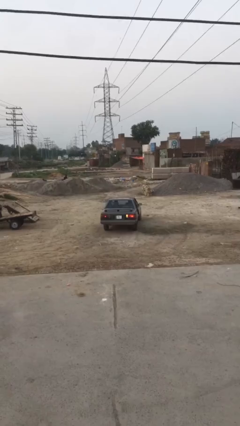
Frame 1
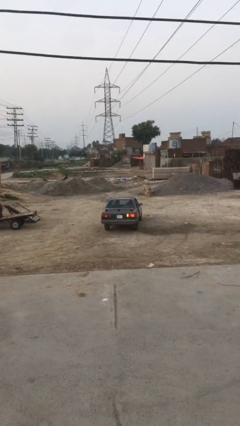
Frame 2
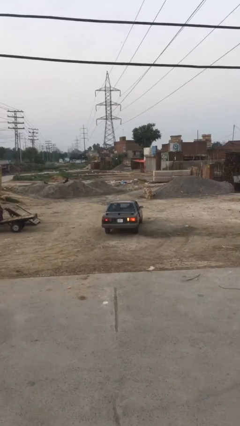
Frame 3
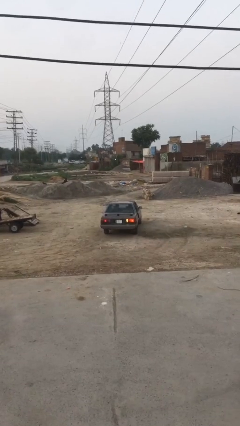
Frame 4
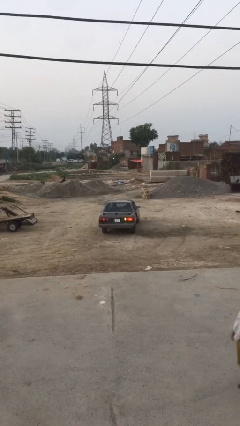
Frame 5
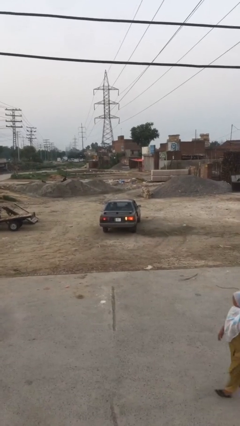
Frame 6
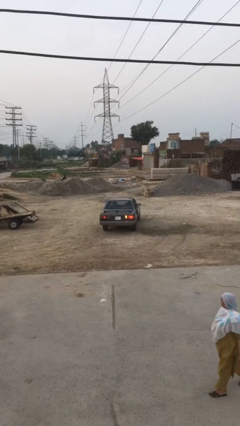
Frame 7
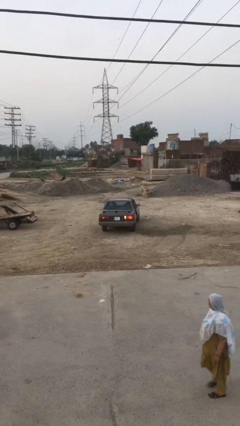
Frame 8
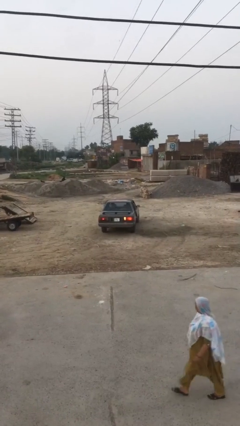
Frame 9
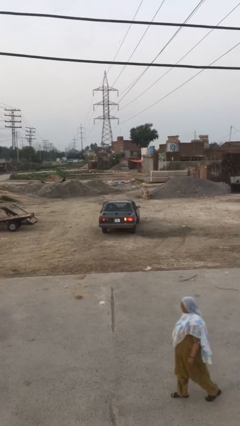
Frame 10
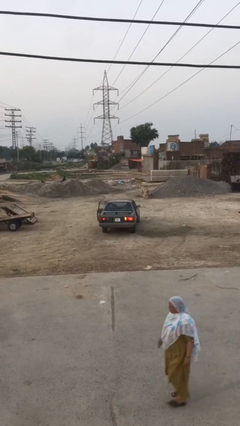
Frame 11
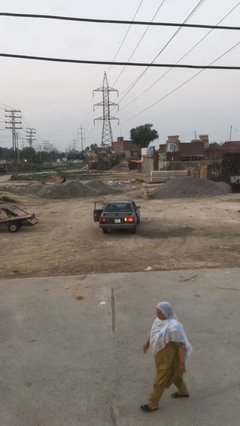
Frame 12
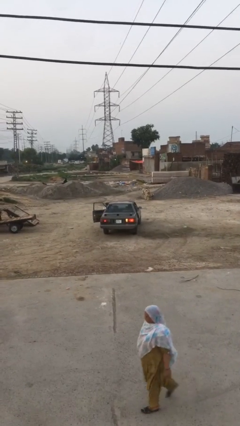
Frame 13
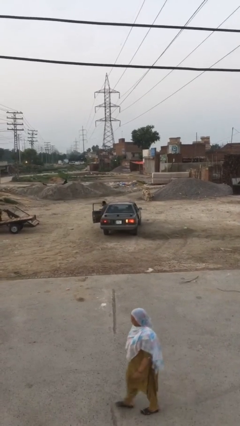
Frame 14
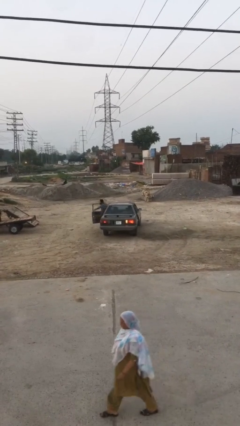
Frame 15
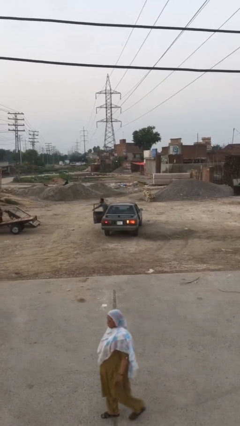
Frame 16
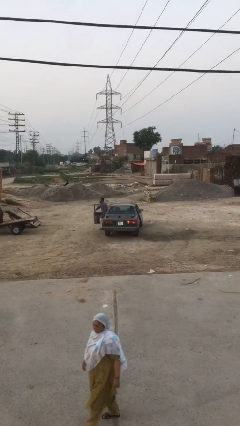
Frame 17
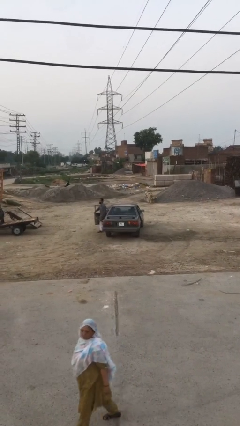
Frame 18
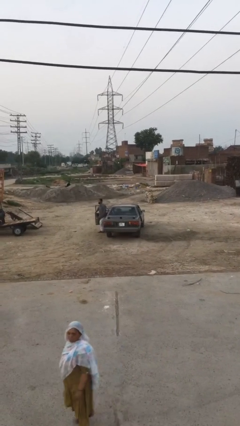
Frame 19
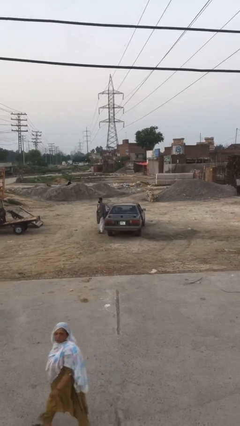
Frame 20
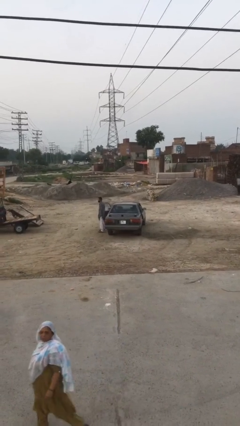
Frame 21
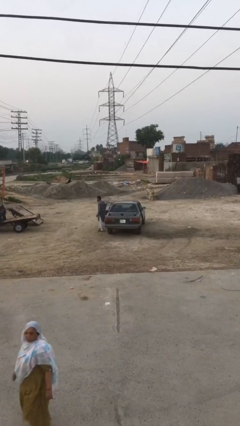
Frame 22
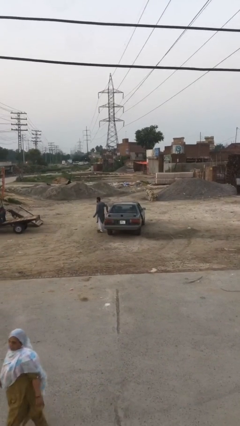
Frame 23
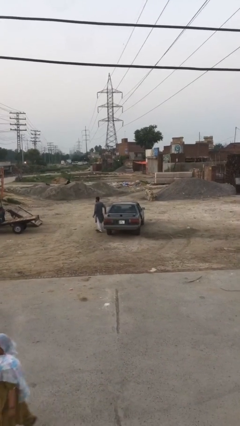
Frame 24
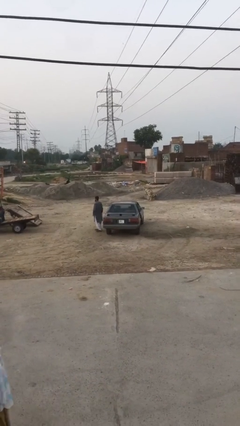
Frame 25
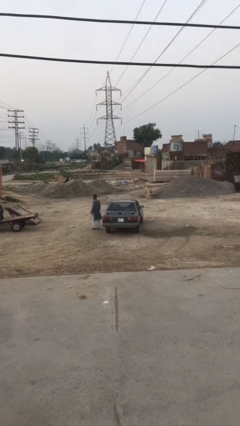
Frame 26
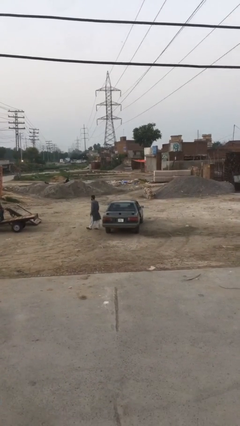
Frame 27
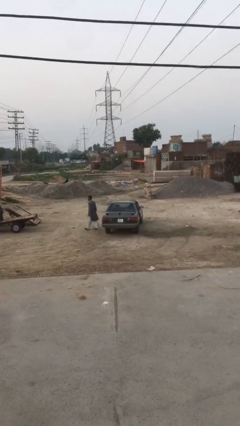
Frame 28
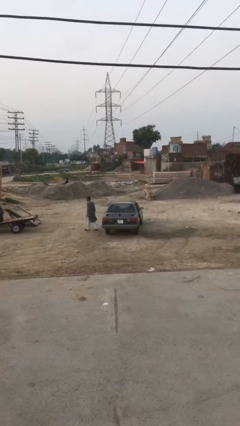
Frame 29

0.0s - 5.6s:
car drops off person

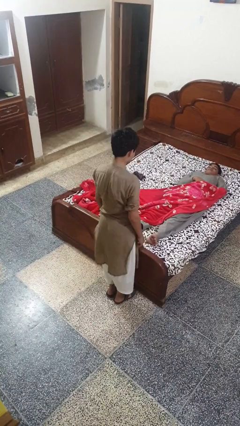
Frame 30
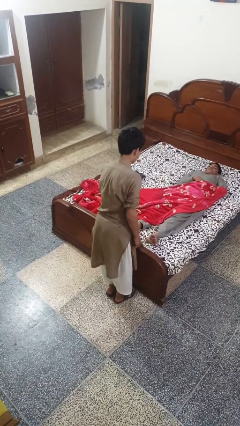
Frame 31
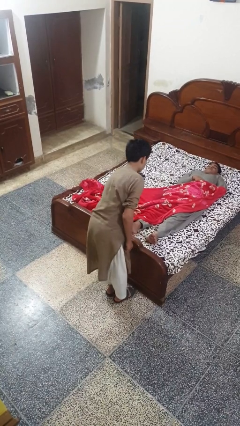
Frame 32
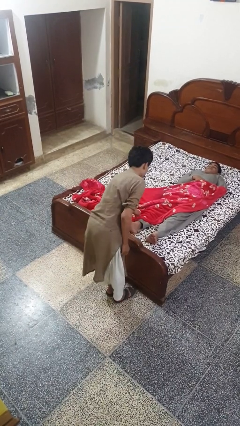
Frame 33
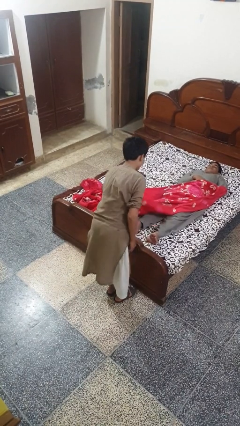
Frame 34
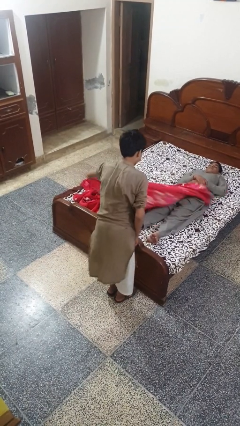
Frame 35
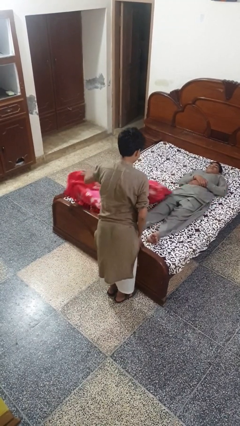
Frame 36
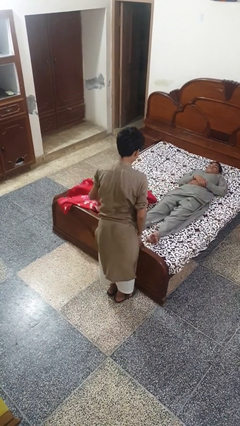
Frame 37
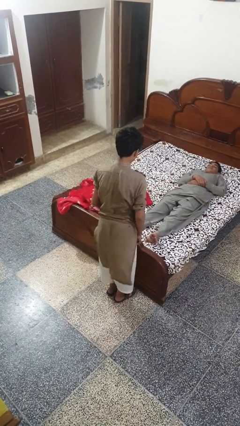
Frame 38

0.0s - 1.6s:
person uncovers friend with blanket

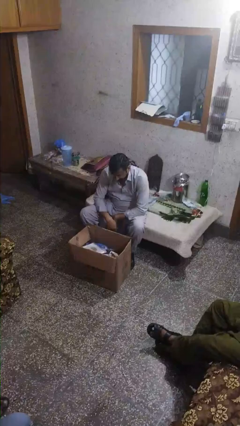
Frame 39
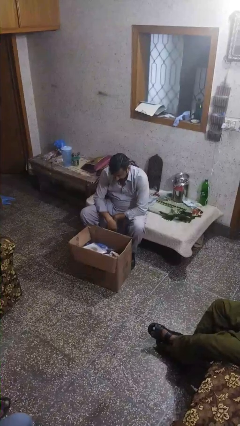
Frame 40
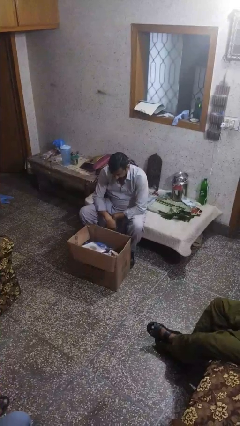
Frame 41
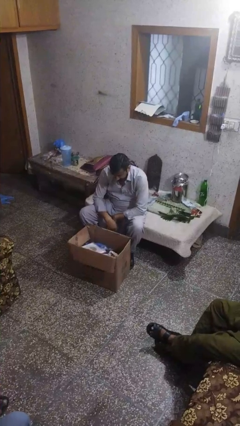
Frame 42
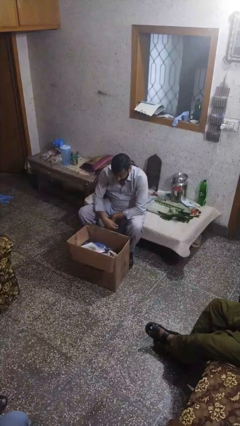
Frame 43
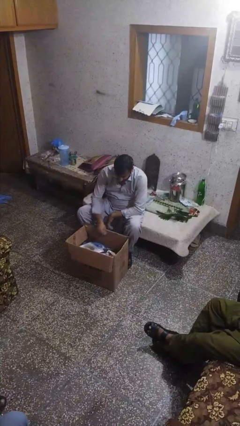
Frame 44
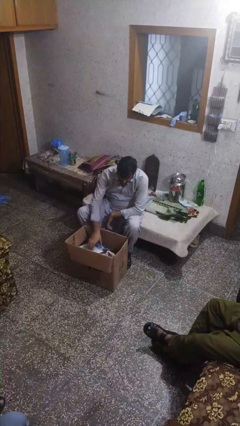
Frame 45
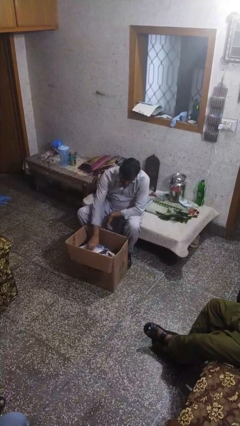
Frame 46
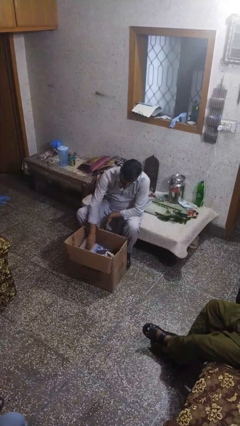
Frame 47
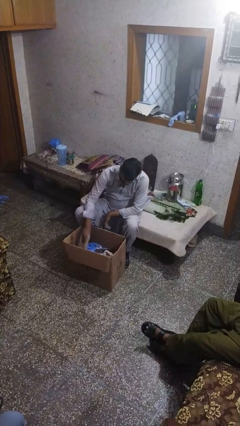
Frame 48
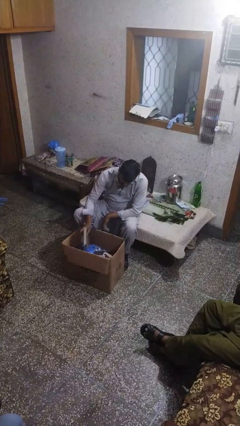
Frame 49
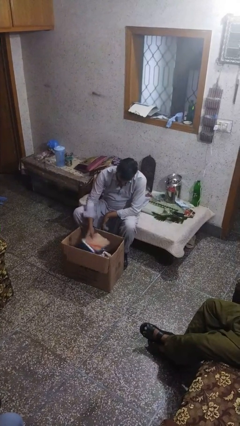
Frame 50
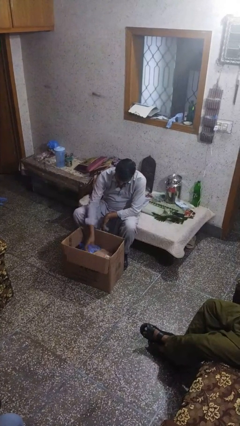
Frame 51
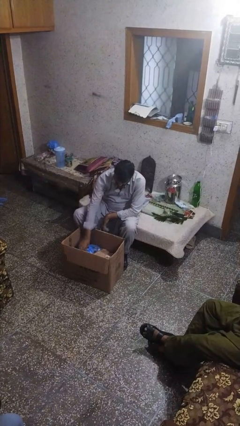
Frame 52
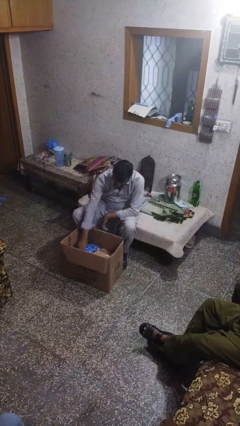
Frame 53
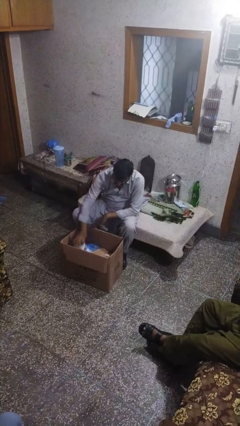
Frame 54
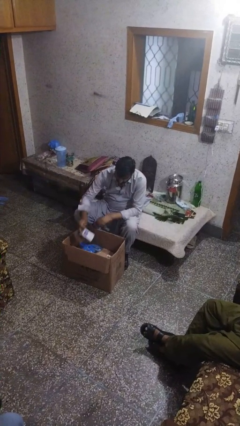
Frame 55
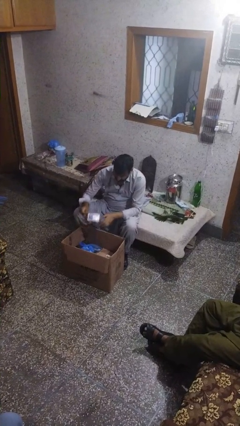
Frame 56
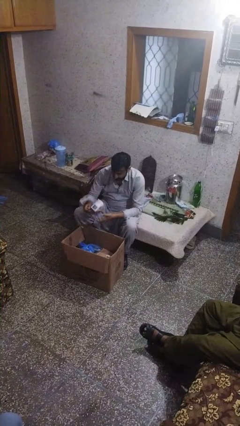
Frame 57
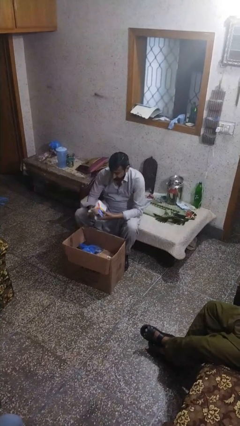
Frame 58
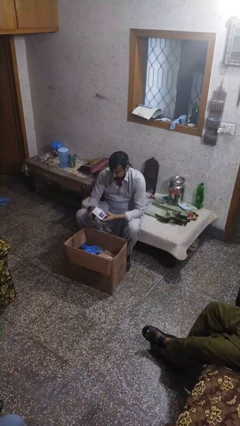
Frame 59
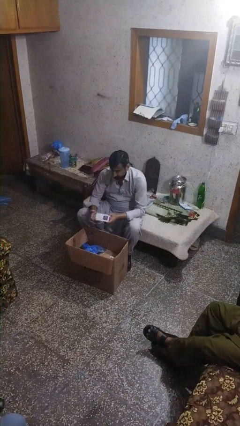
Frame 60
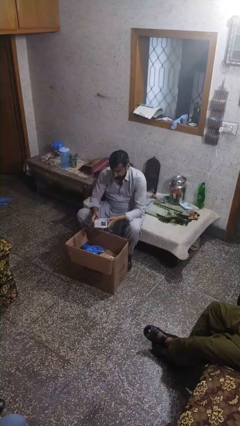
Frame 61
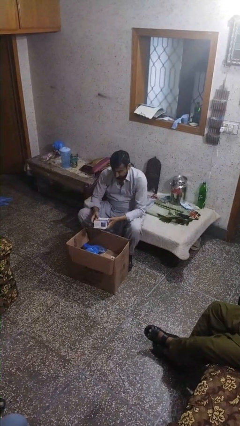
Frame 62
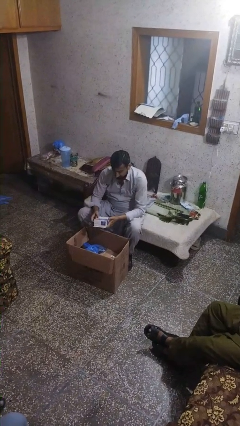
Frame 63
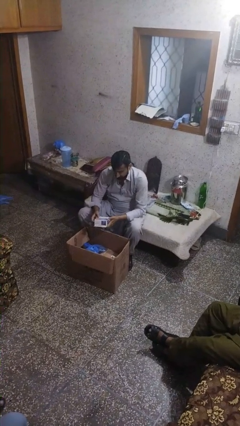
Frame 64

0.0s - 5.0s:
person takes object from box

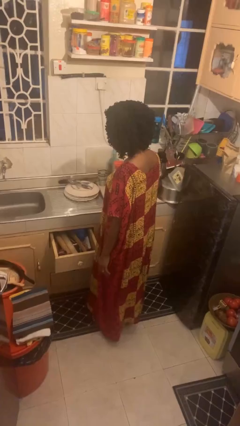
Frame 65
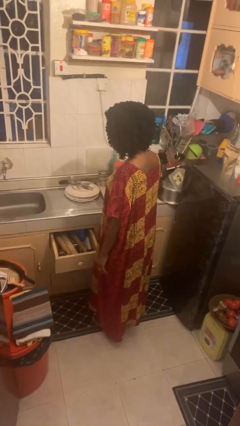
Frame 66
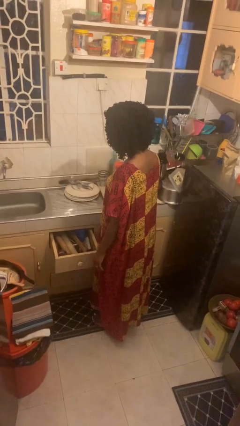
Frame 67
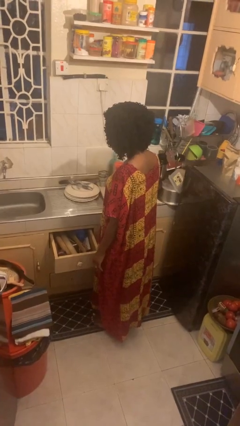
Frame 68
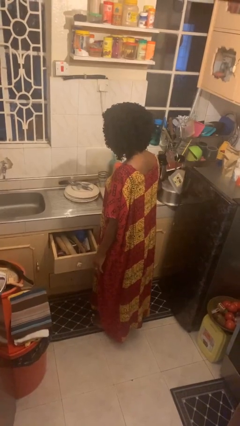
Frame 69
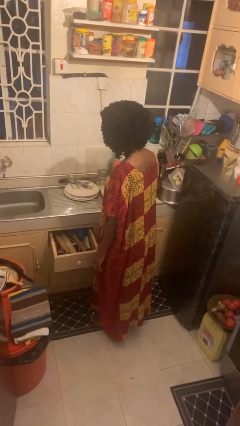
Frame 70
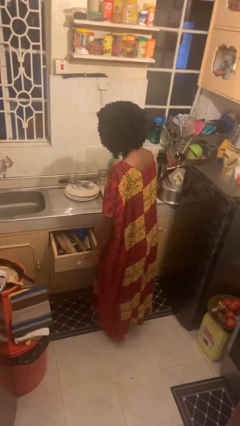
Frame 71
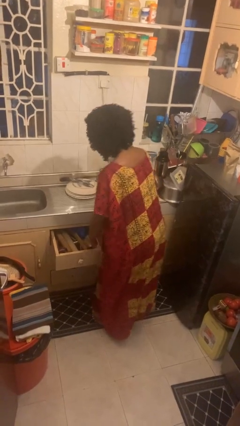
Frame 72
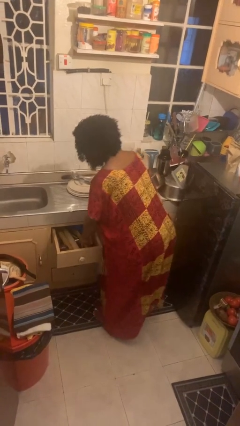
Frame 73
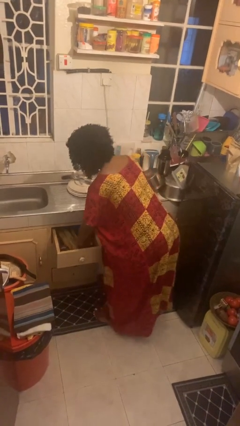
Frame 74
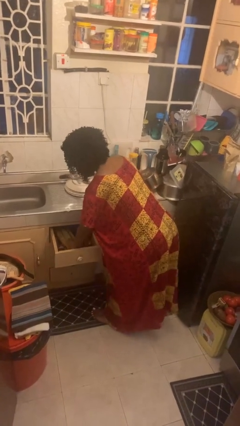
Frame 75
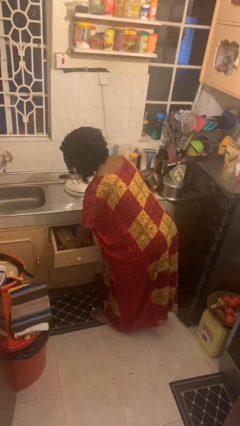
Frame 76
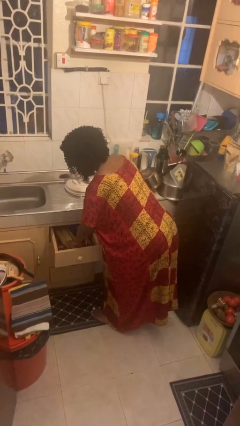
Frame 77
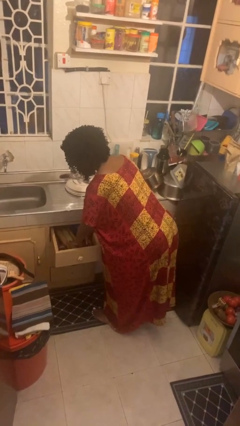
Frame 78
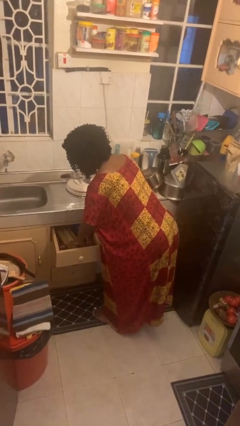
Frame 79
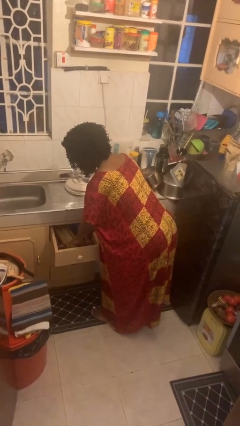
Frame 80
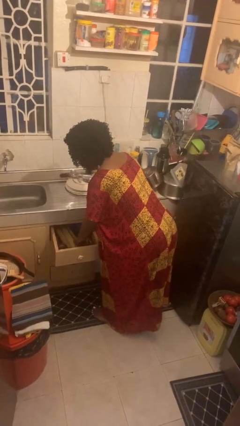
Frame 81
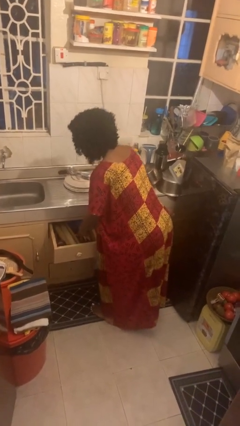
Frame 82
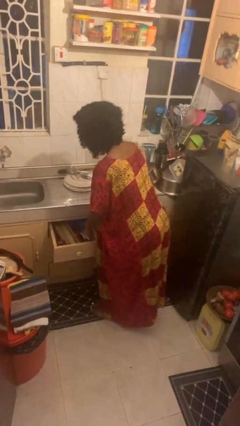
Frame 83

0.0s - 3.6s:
person searches in kitchen drawer

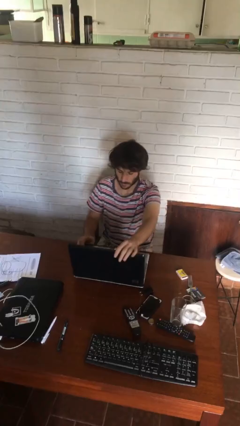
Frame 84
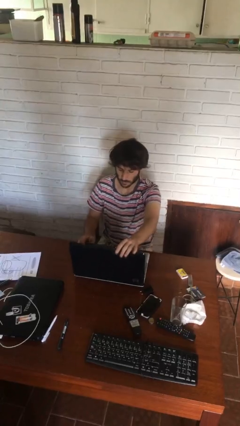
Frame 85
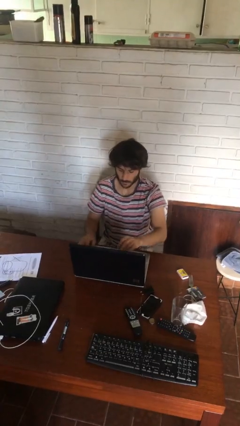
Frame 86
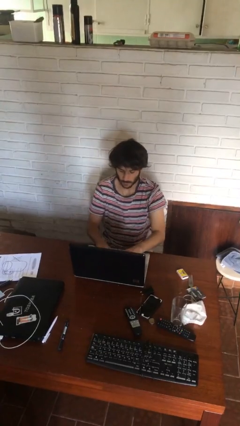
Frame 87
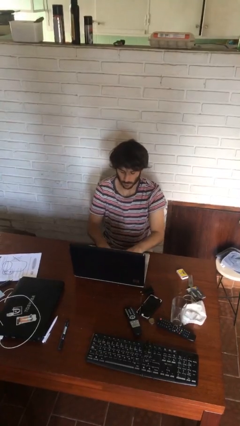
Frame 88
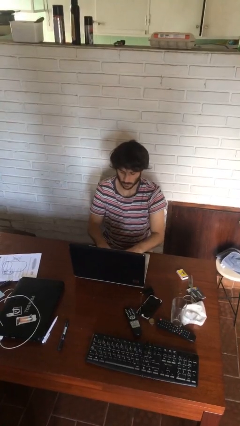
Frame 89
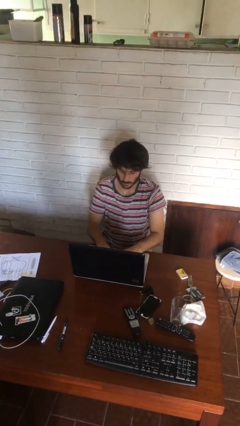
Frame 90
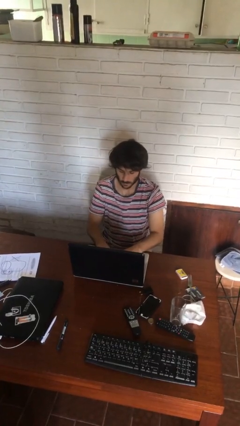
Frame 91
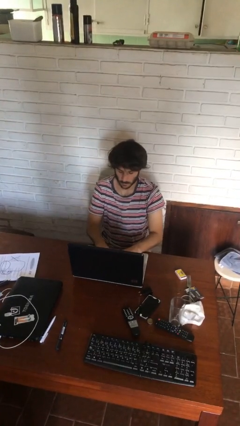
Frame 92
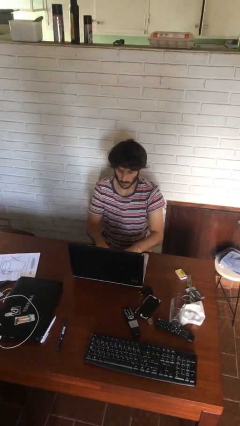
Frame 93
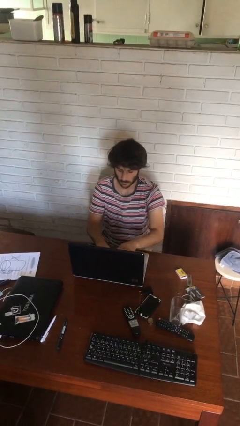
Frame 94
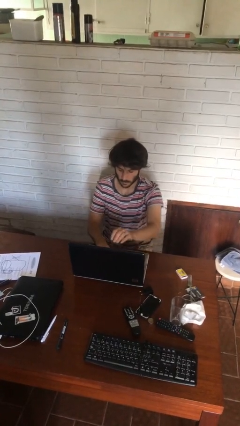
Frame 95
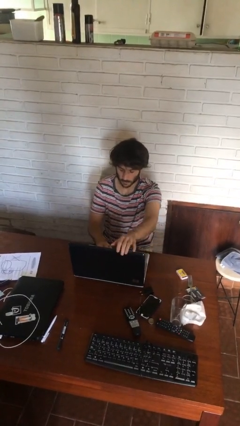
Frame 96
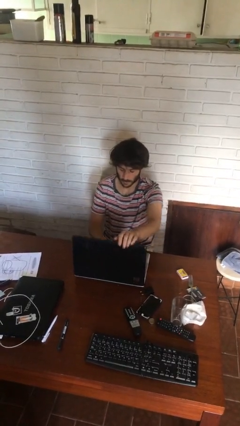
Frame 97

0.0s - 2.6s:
person interacts with laptop
